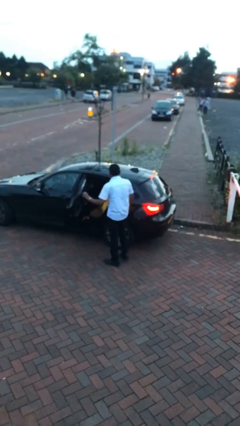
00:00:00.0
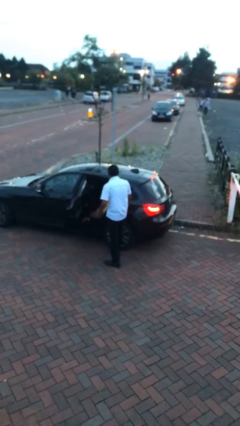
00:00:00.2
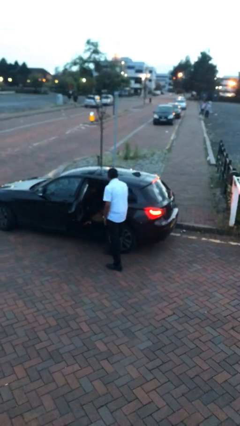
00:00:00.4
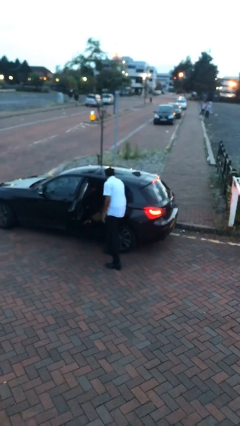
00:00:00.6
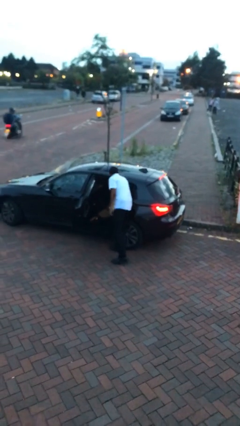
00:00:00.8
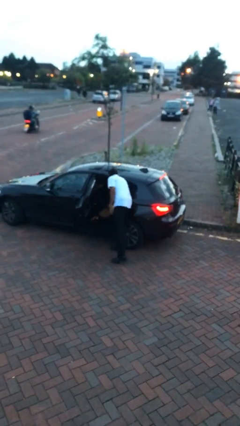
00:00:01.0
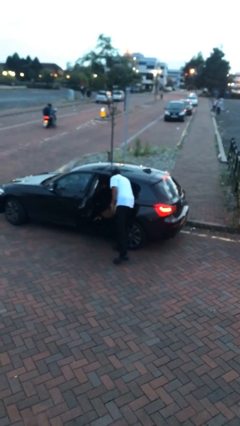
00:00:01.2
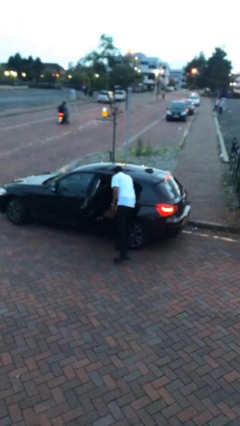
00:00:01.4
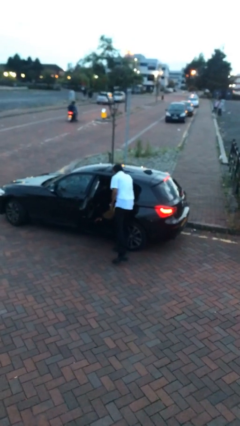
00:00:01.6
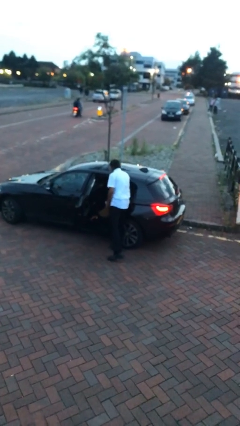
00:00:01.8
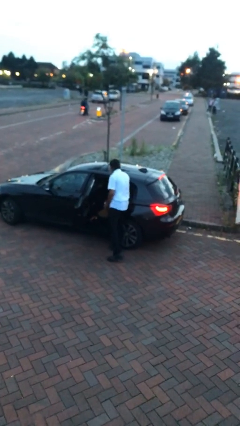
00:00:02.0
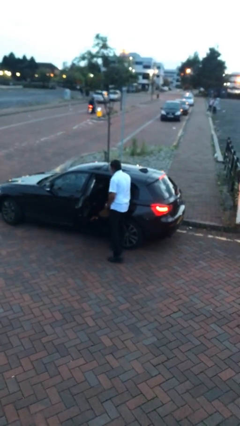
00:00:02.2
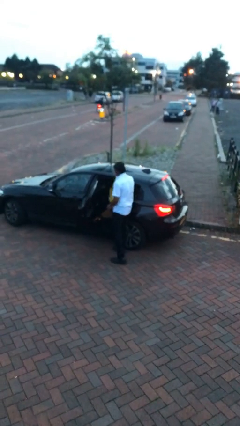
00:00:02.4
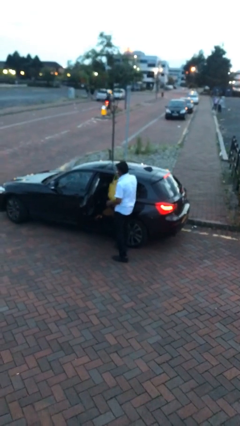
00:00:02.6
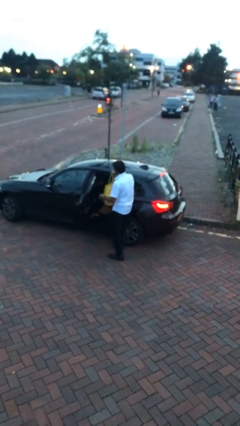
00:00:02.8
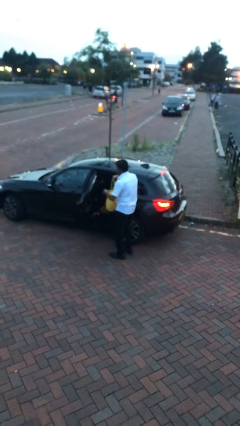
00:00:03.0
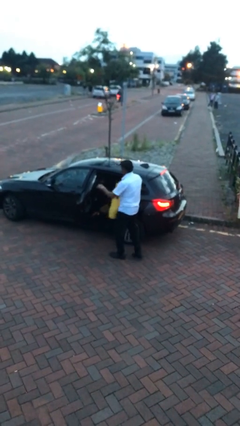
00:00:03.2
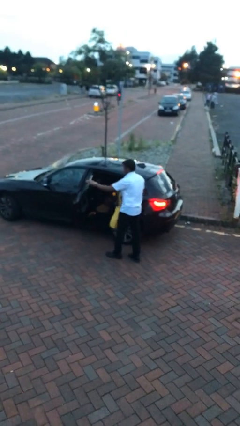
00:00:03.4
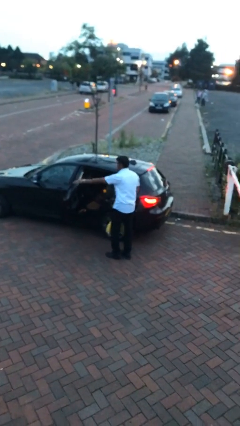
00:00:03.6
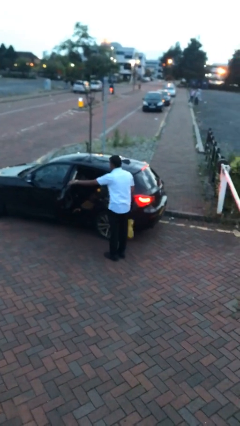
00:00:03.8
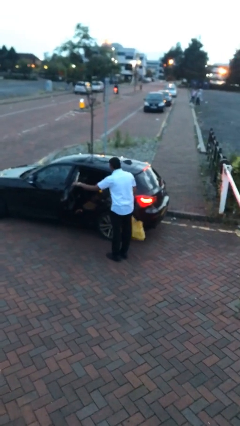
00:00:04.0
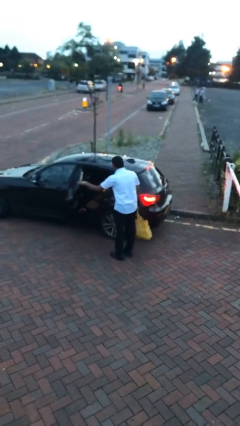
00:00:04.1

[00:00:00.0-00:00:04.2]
person unloads car

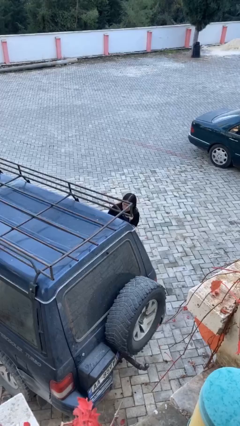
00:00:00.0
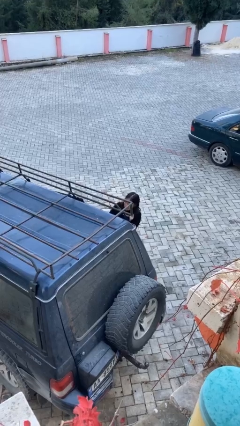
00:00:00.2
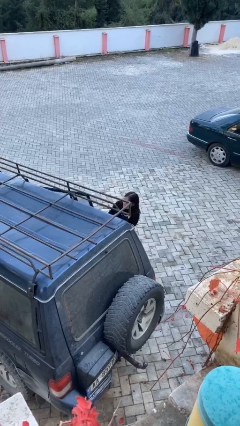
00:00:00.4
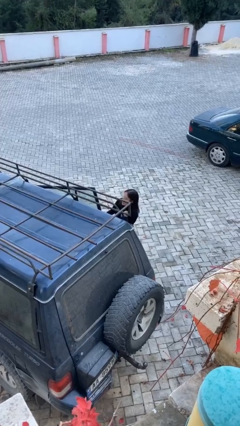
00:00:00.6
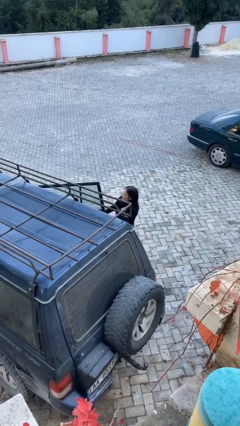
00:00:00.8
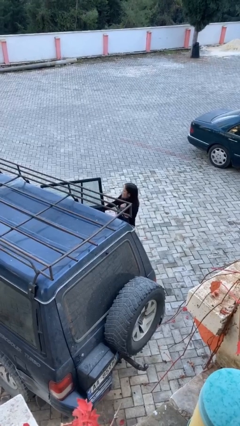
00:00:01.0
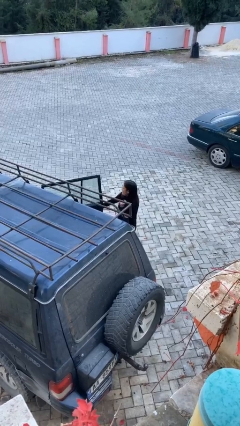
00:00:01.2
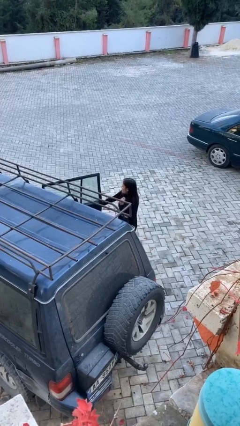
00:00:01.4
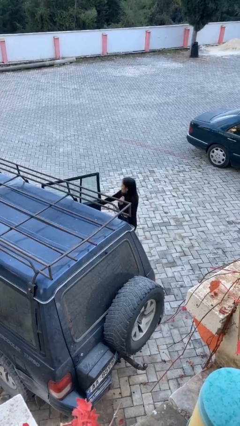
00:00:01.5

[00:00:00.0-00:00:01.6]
person opens car door

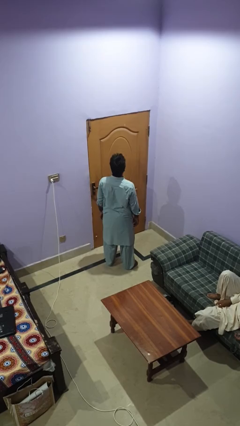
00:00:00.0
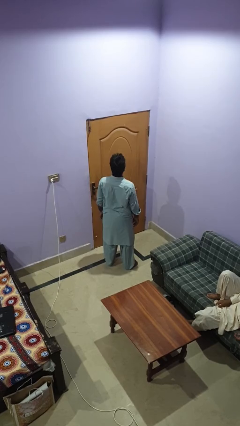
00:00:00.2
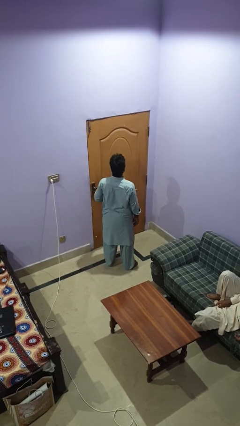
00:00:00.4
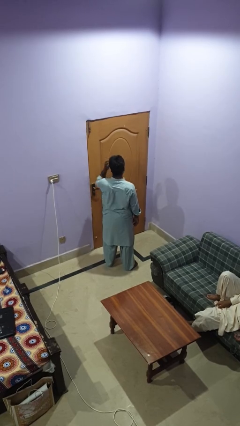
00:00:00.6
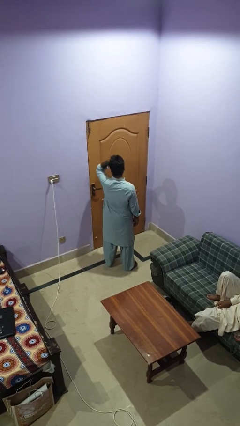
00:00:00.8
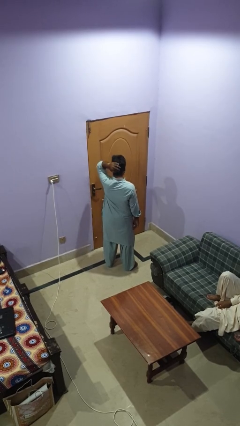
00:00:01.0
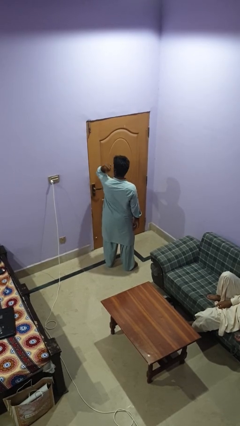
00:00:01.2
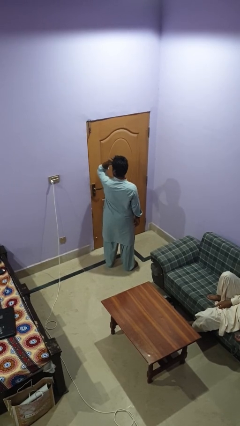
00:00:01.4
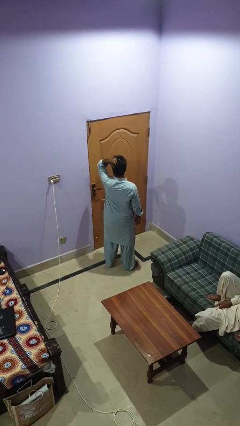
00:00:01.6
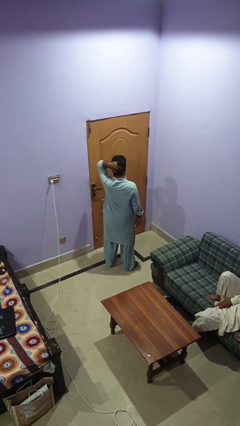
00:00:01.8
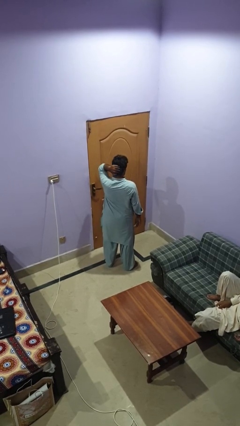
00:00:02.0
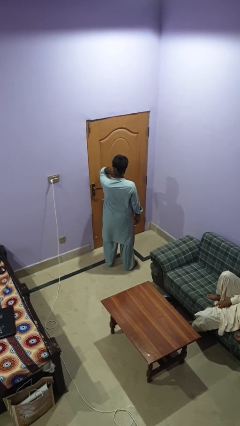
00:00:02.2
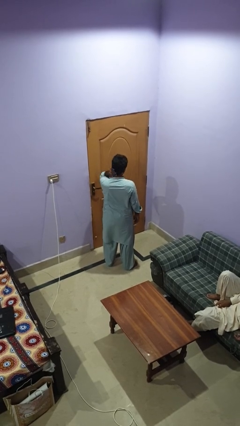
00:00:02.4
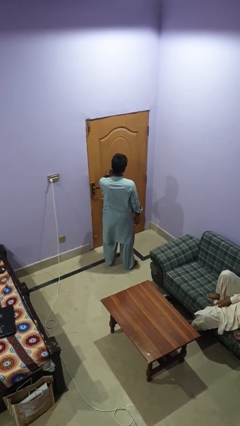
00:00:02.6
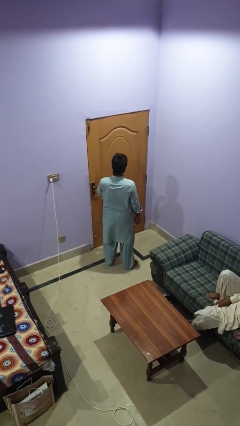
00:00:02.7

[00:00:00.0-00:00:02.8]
person strokes hair

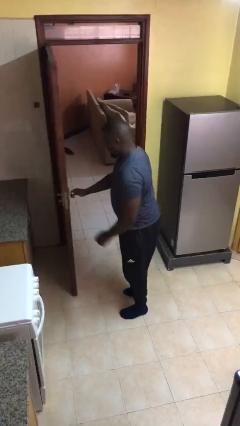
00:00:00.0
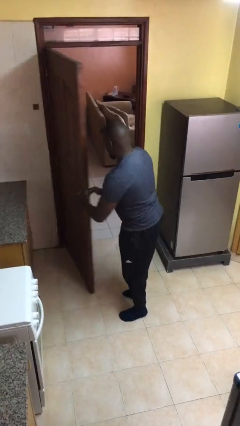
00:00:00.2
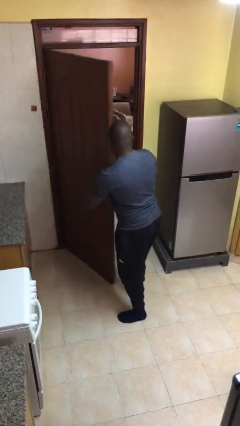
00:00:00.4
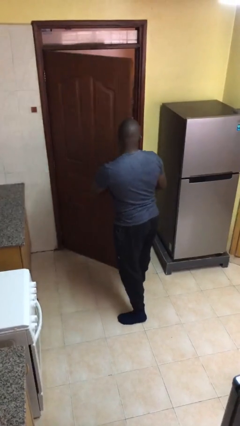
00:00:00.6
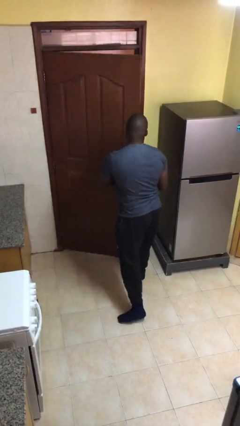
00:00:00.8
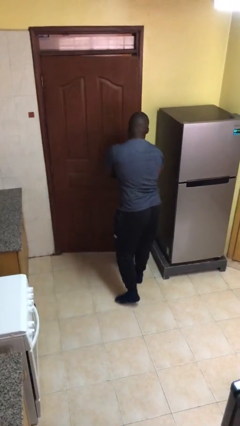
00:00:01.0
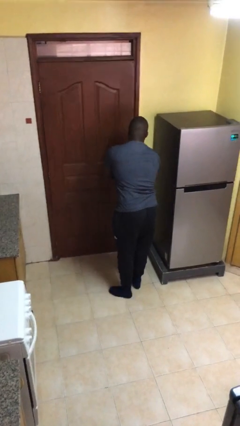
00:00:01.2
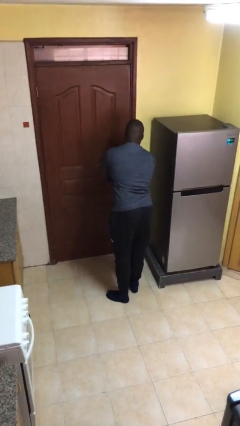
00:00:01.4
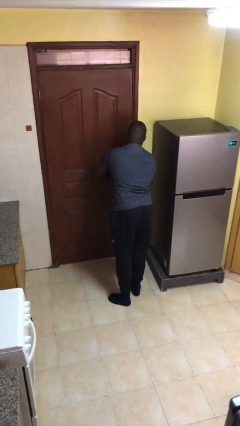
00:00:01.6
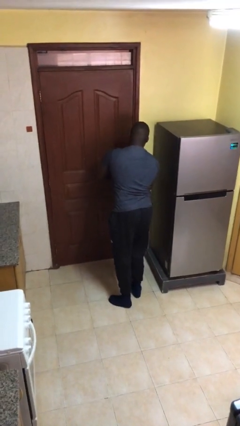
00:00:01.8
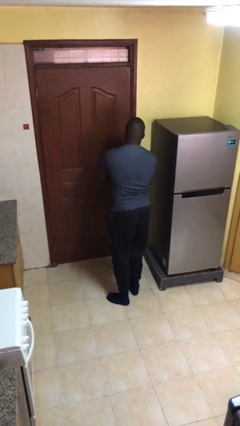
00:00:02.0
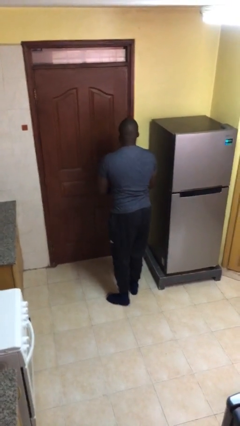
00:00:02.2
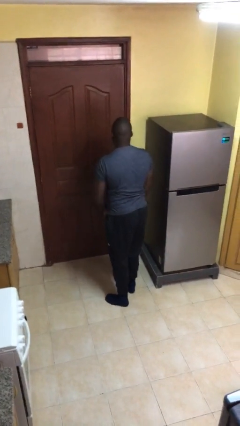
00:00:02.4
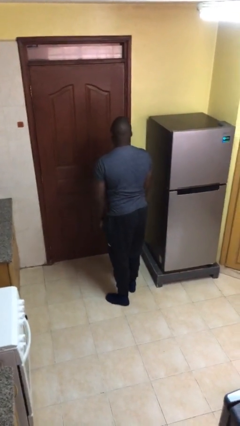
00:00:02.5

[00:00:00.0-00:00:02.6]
person closes facility door

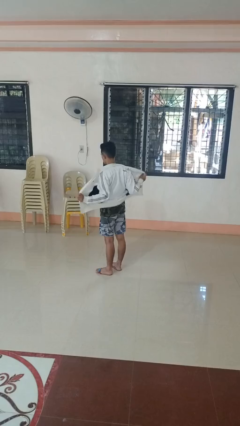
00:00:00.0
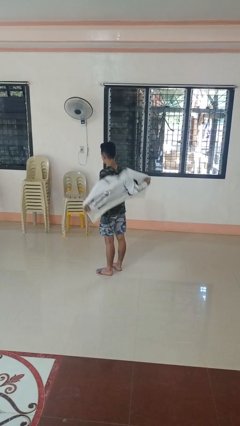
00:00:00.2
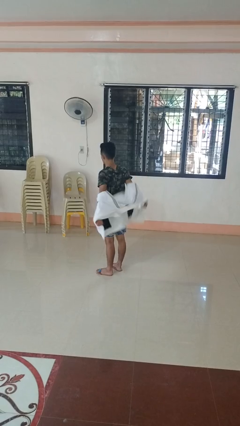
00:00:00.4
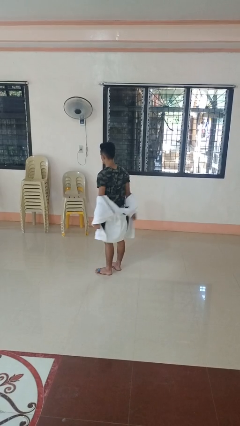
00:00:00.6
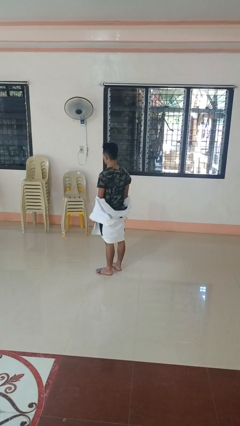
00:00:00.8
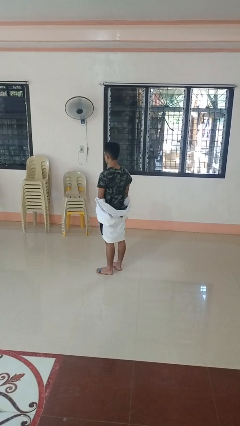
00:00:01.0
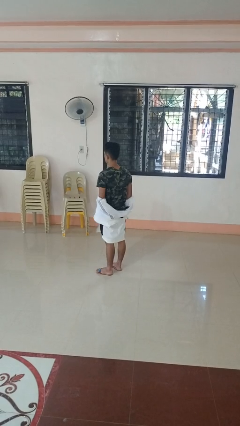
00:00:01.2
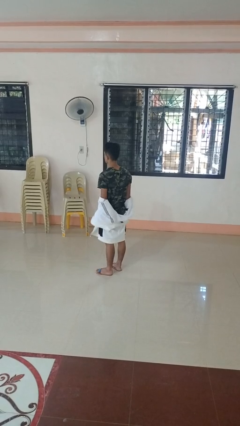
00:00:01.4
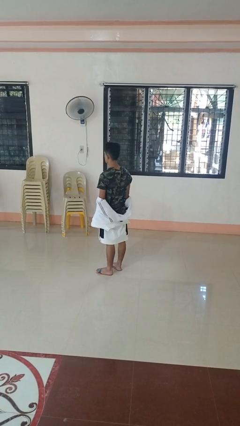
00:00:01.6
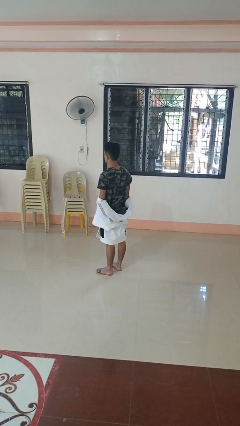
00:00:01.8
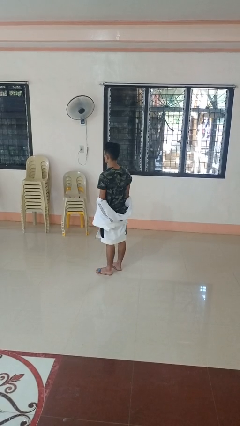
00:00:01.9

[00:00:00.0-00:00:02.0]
person takes off jacket

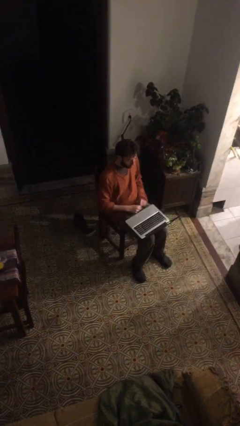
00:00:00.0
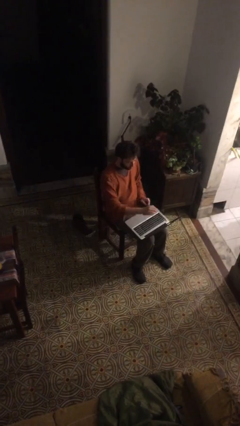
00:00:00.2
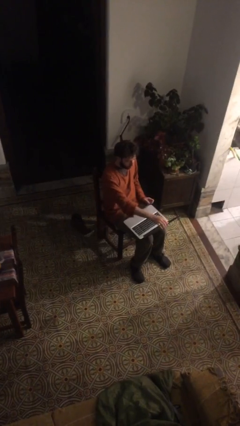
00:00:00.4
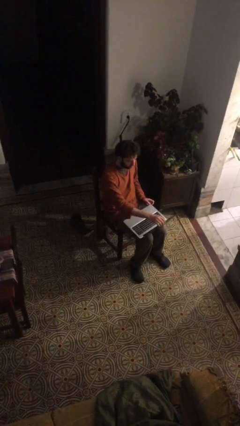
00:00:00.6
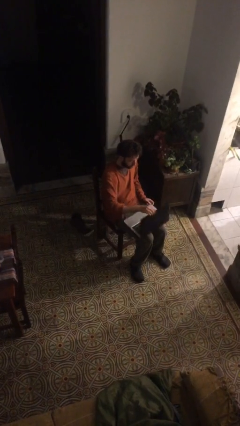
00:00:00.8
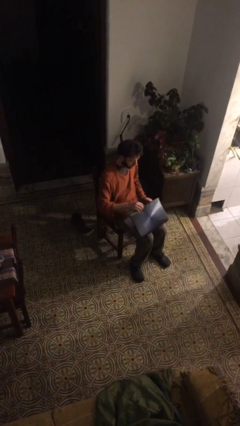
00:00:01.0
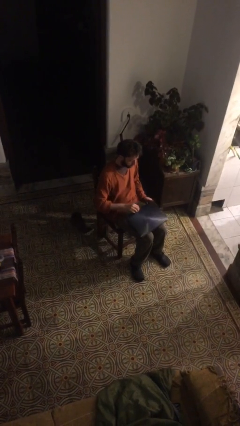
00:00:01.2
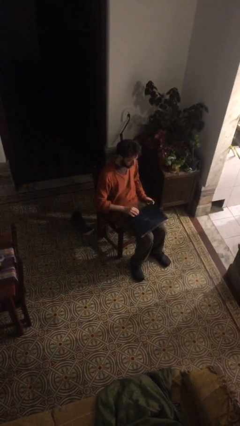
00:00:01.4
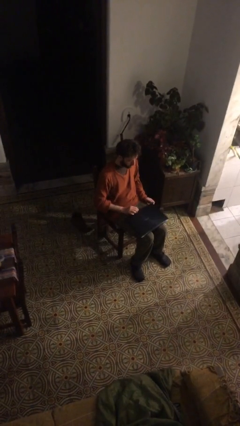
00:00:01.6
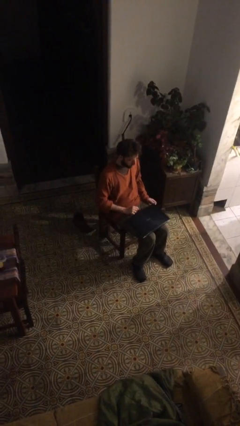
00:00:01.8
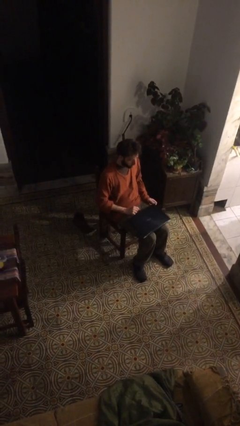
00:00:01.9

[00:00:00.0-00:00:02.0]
person closes laptop

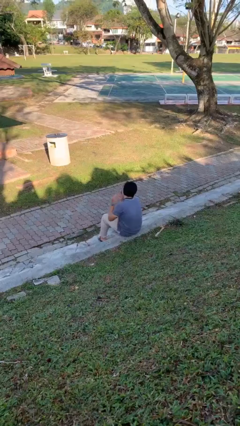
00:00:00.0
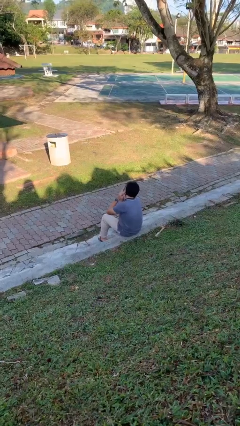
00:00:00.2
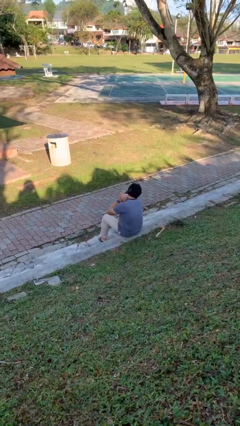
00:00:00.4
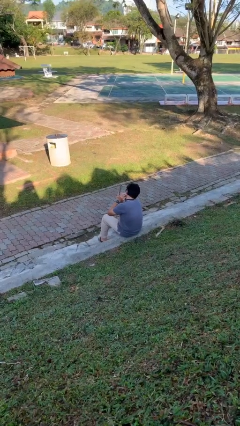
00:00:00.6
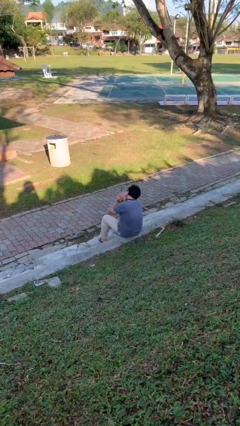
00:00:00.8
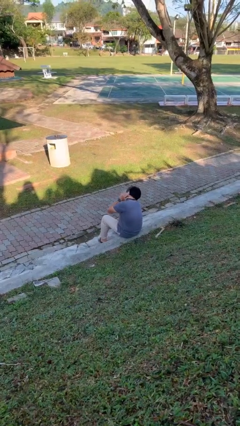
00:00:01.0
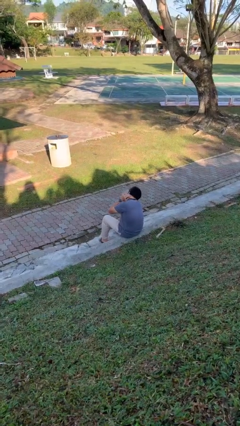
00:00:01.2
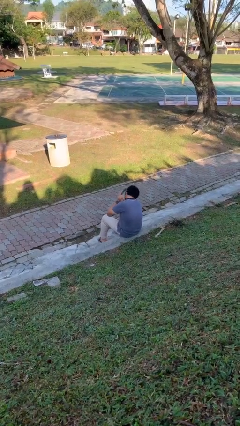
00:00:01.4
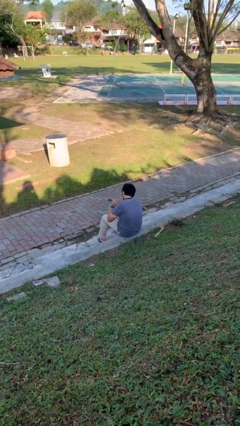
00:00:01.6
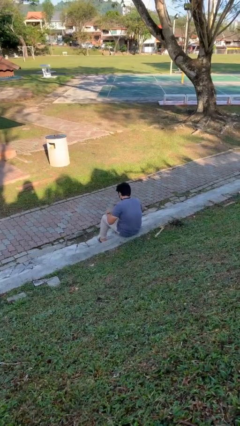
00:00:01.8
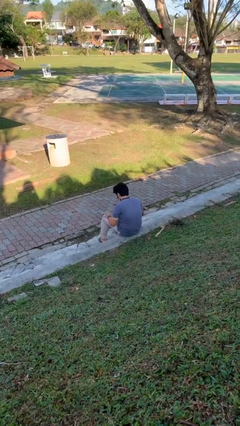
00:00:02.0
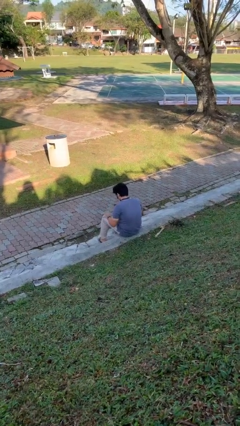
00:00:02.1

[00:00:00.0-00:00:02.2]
person brushes hair
